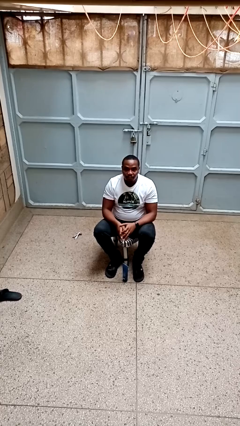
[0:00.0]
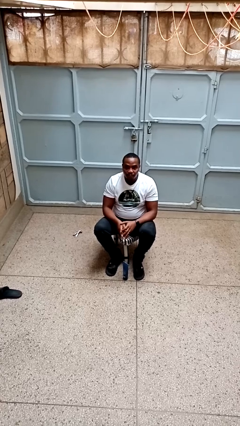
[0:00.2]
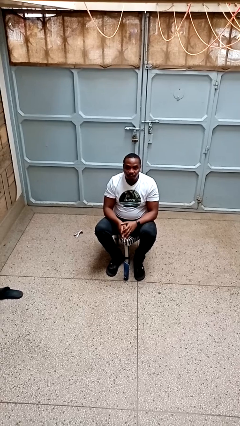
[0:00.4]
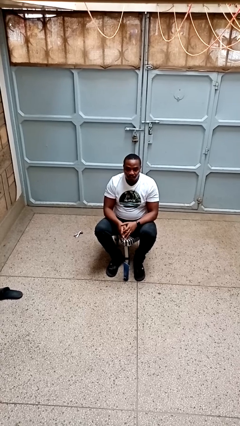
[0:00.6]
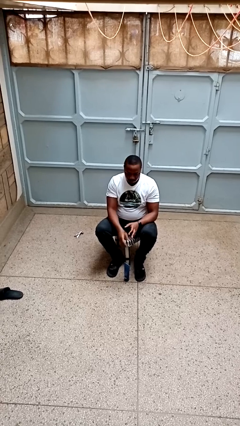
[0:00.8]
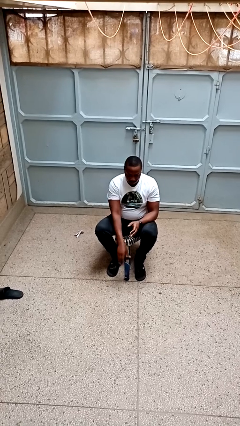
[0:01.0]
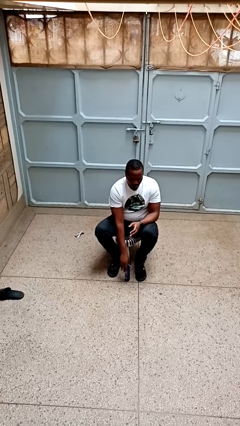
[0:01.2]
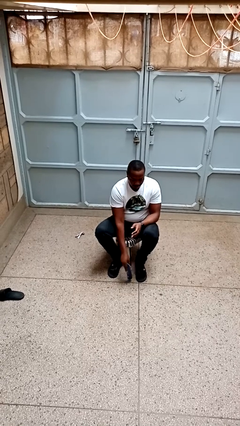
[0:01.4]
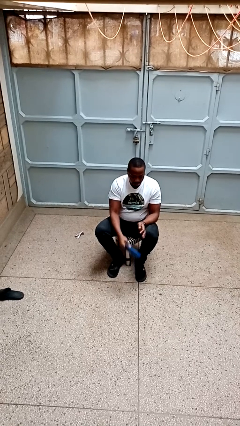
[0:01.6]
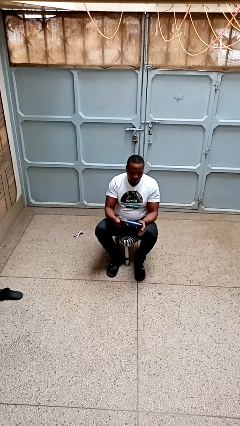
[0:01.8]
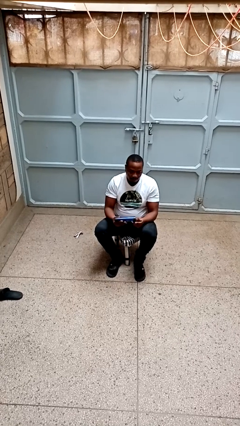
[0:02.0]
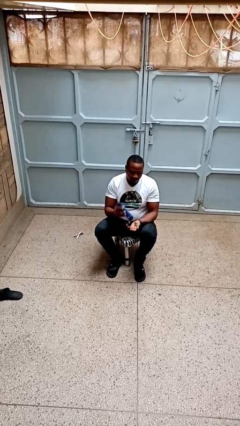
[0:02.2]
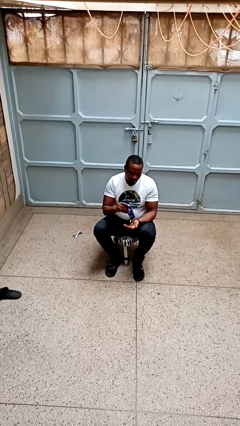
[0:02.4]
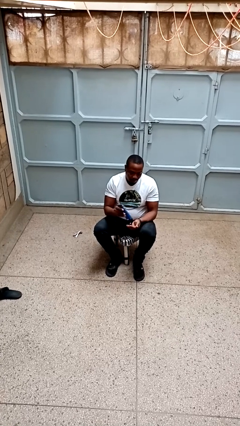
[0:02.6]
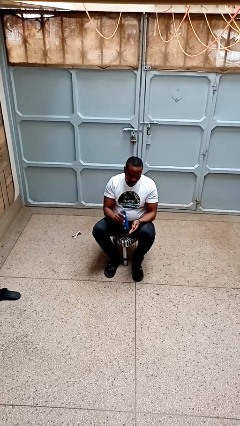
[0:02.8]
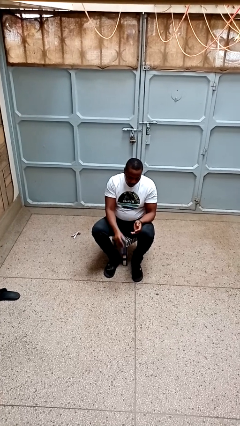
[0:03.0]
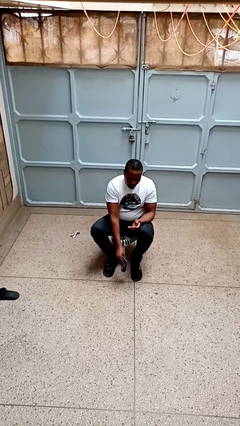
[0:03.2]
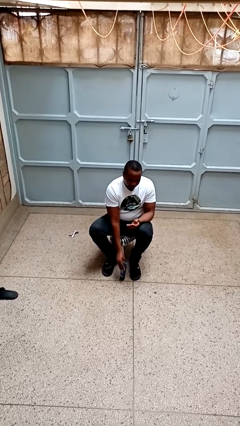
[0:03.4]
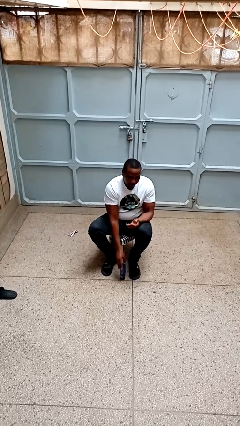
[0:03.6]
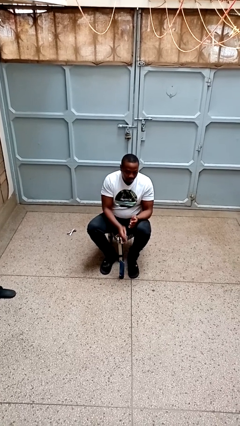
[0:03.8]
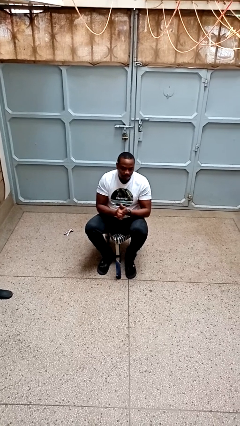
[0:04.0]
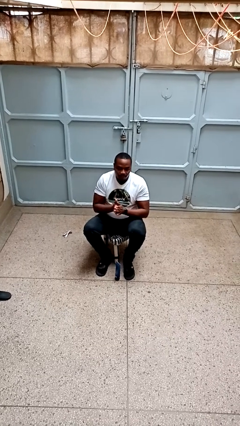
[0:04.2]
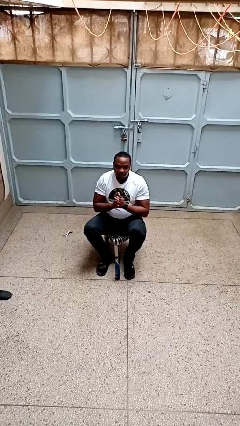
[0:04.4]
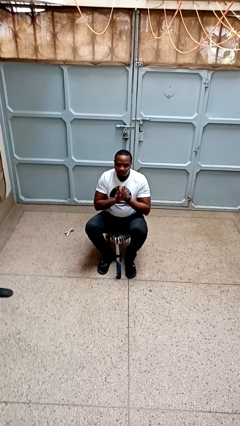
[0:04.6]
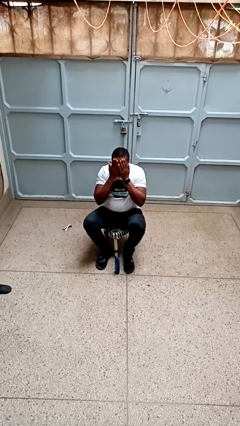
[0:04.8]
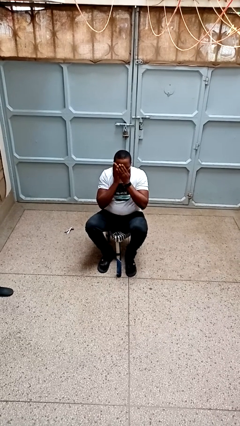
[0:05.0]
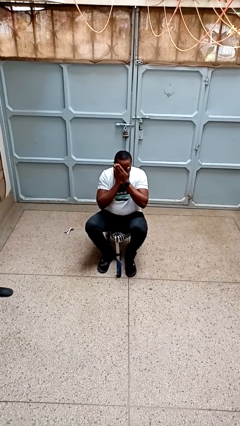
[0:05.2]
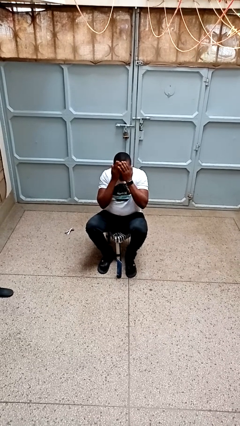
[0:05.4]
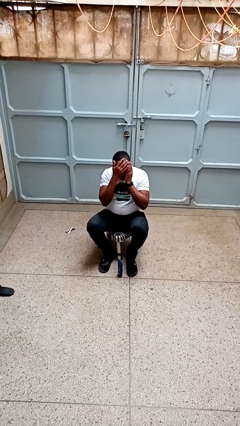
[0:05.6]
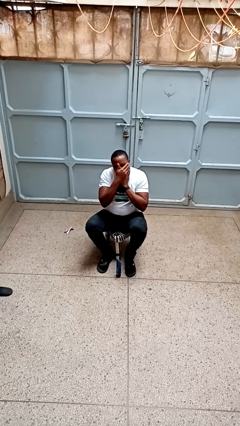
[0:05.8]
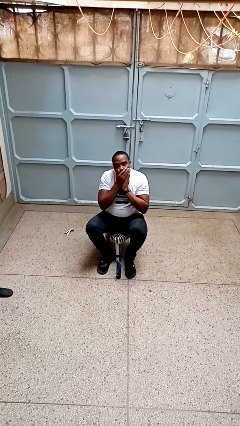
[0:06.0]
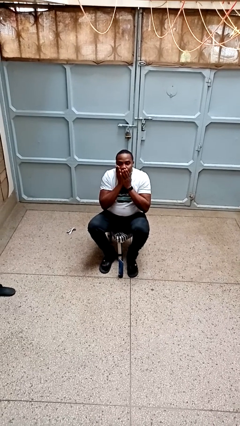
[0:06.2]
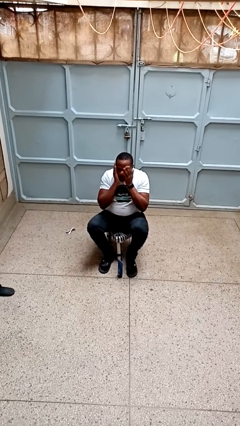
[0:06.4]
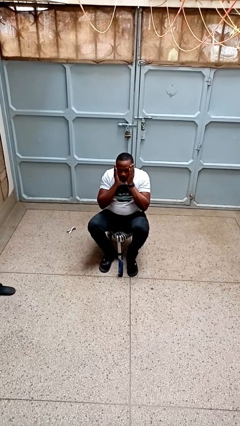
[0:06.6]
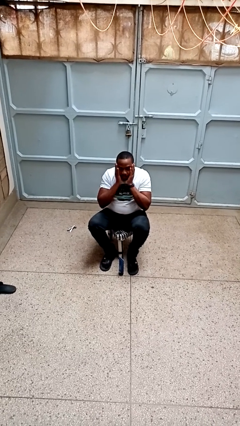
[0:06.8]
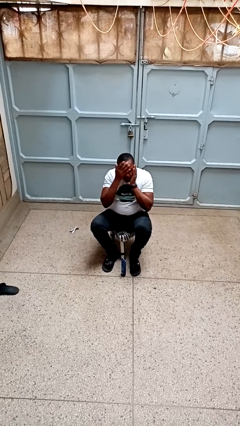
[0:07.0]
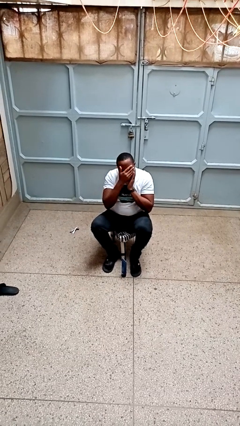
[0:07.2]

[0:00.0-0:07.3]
person applies facial moisturizer

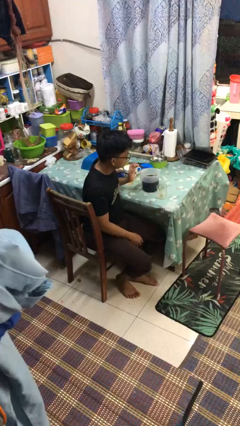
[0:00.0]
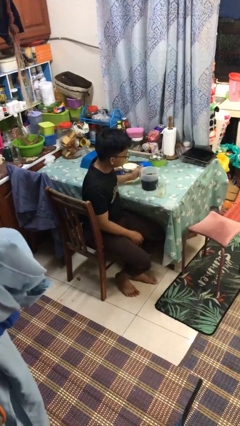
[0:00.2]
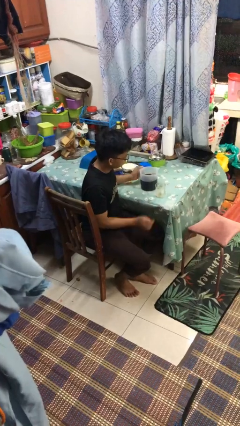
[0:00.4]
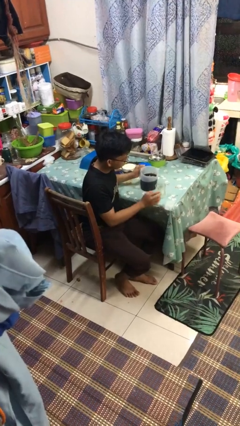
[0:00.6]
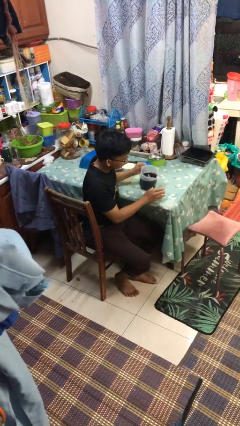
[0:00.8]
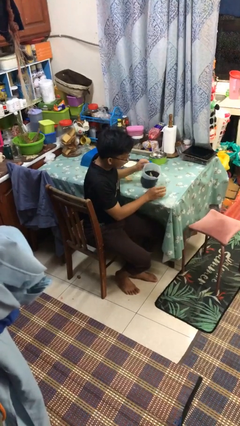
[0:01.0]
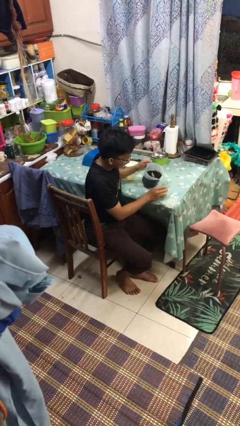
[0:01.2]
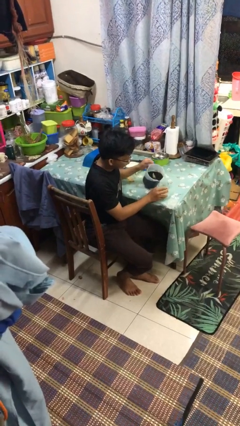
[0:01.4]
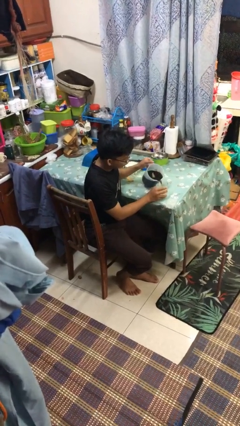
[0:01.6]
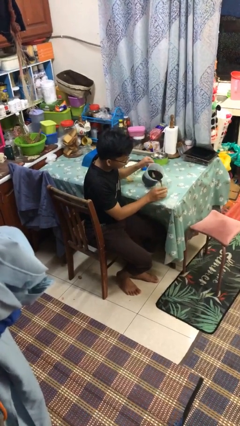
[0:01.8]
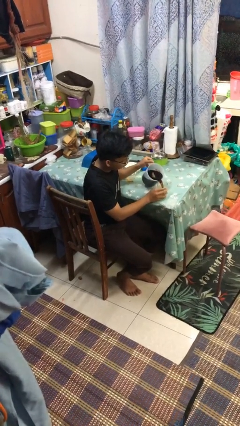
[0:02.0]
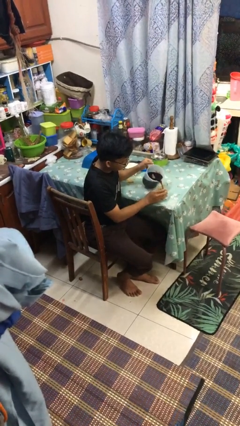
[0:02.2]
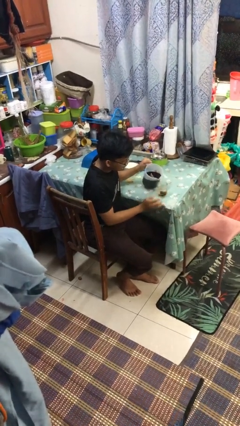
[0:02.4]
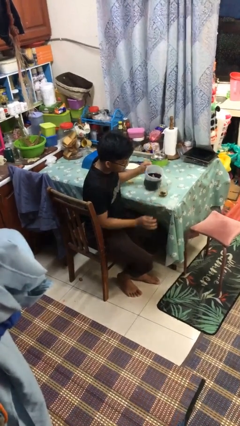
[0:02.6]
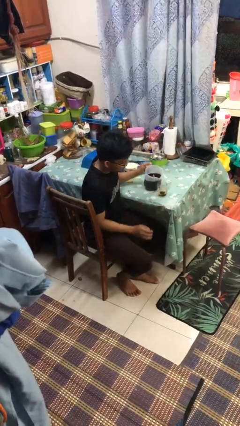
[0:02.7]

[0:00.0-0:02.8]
person pours coffee into mug

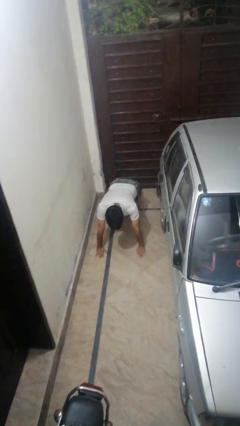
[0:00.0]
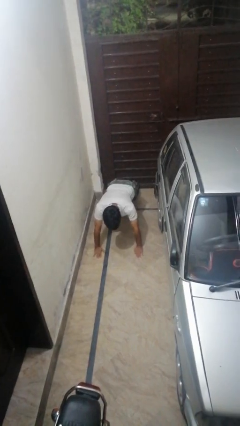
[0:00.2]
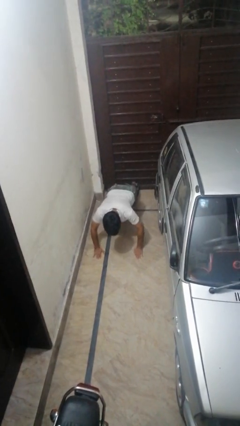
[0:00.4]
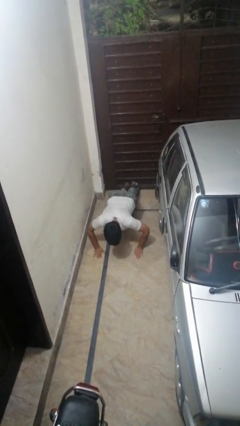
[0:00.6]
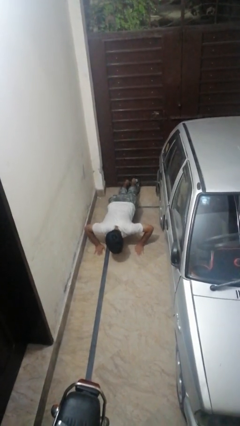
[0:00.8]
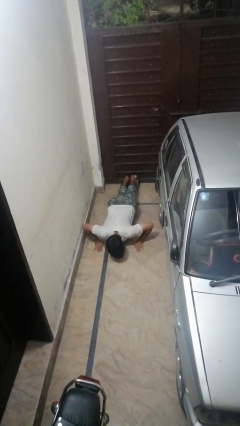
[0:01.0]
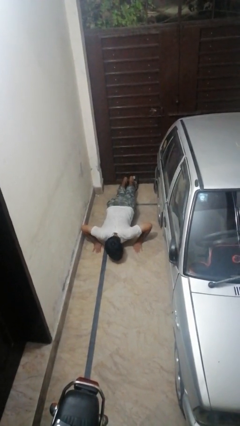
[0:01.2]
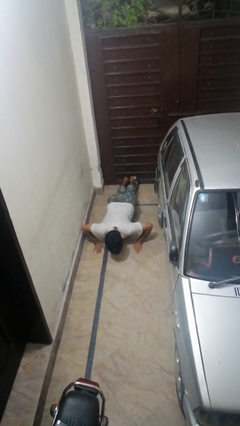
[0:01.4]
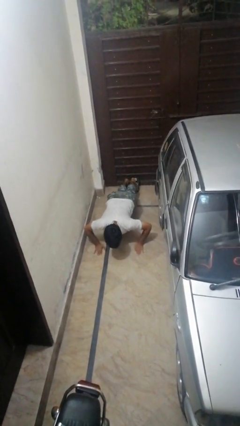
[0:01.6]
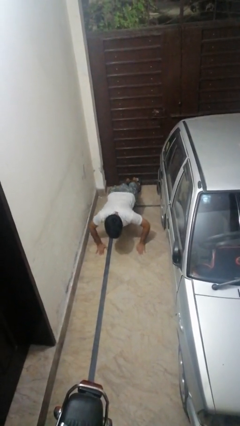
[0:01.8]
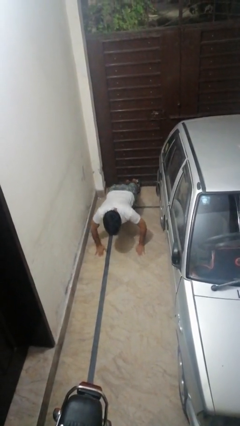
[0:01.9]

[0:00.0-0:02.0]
person exercises with pushup

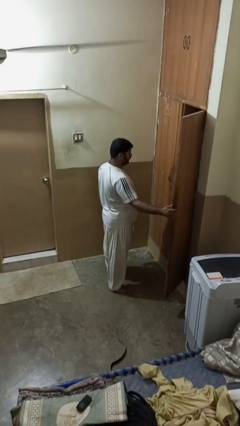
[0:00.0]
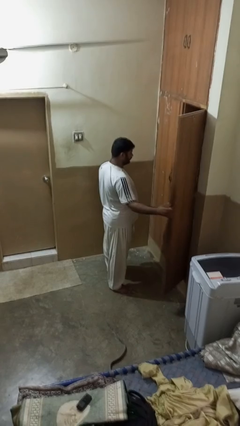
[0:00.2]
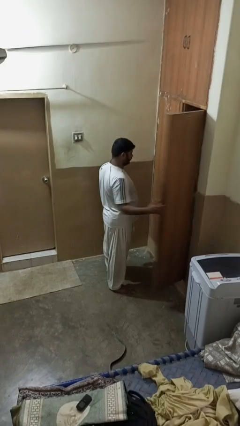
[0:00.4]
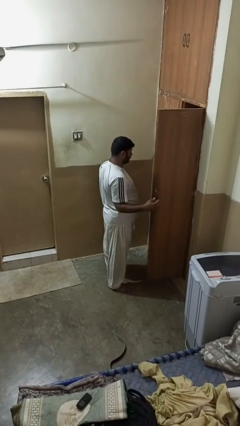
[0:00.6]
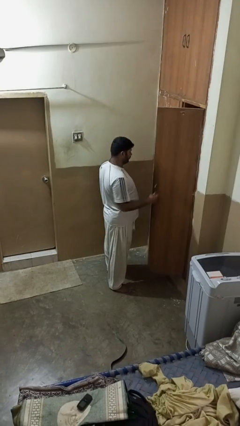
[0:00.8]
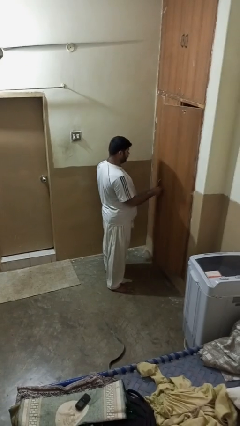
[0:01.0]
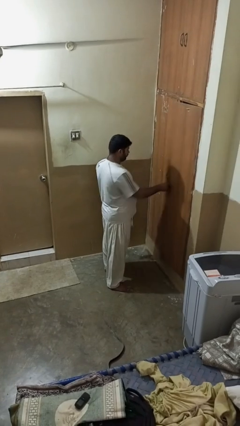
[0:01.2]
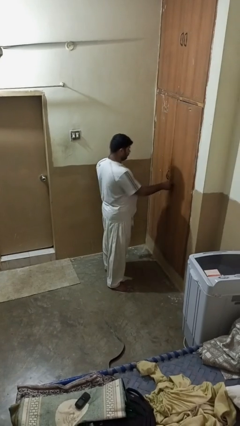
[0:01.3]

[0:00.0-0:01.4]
person closes closet door

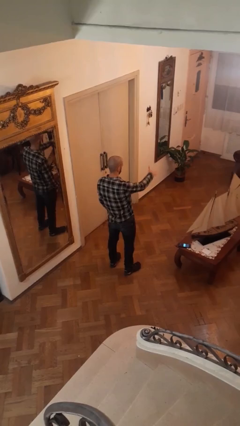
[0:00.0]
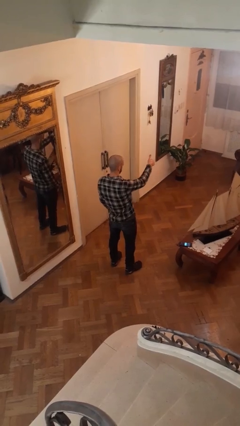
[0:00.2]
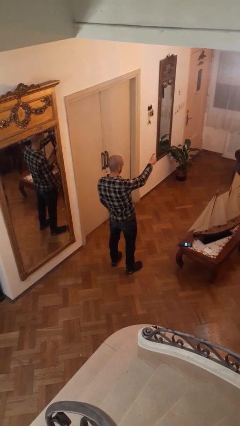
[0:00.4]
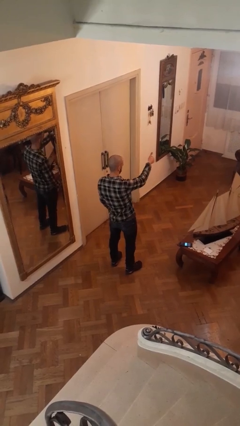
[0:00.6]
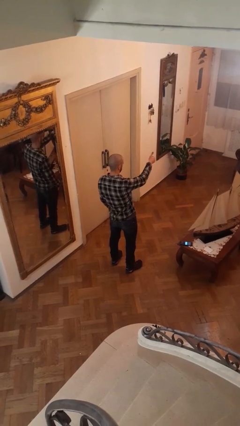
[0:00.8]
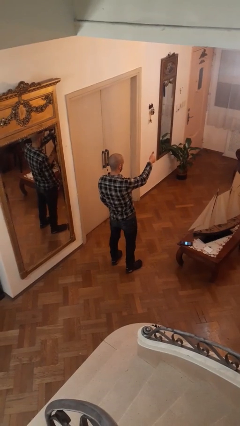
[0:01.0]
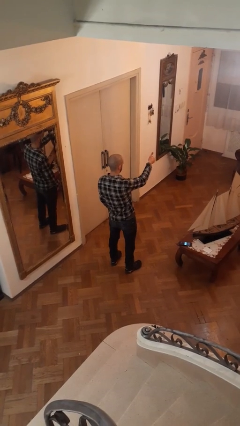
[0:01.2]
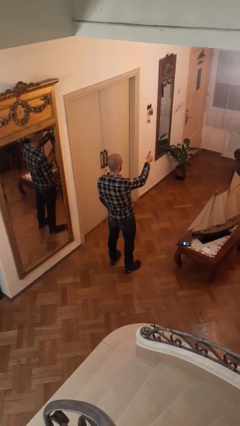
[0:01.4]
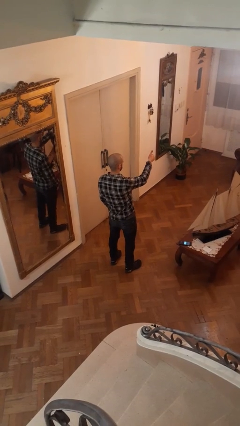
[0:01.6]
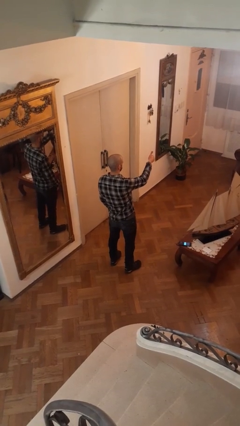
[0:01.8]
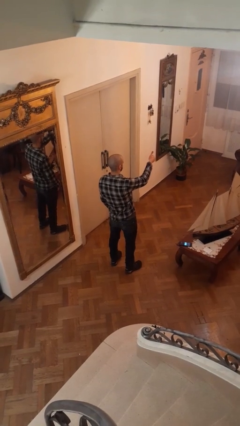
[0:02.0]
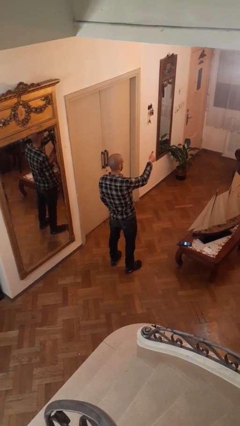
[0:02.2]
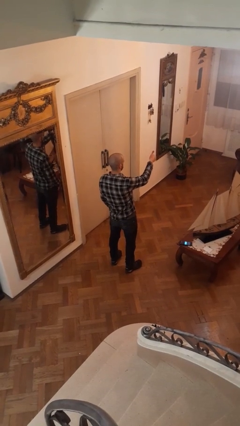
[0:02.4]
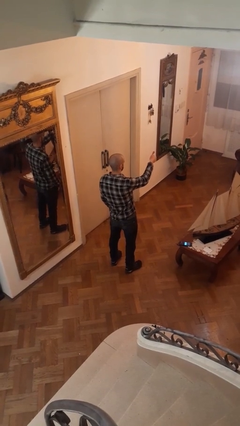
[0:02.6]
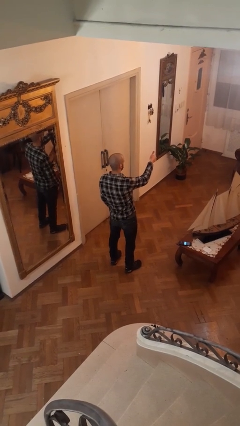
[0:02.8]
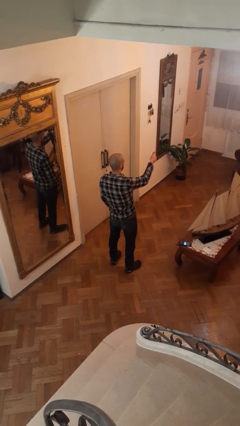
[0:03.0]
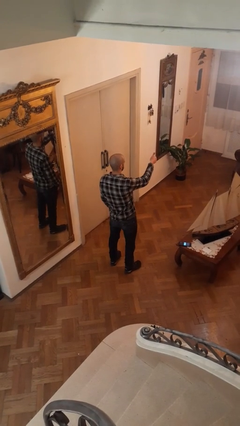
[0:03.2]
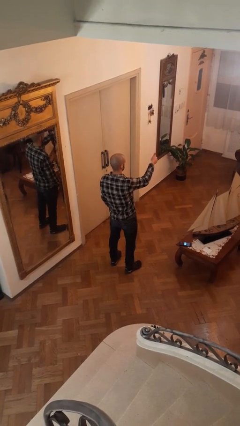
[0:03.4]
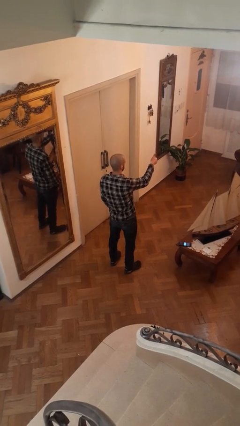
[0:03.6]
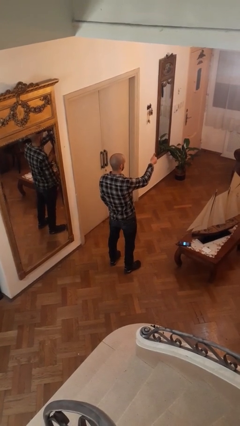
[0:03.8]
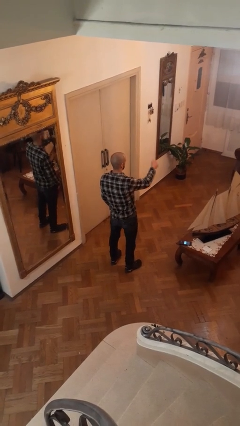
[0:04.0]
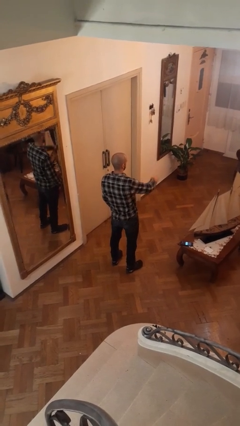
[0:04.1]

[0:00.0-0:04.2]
person gestures thumbs up

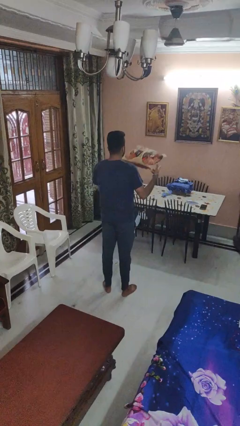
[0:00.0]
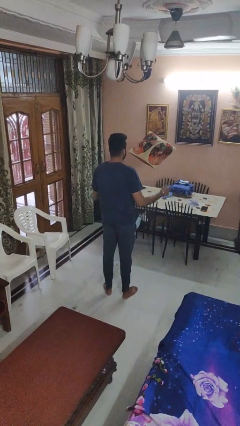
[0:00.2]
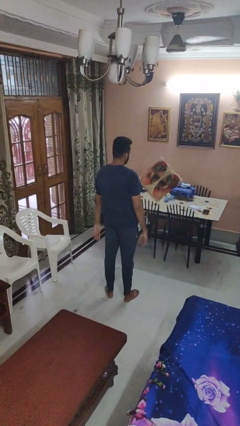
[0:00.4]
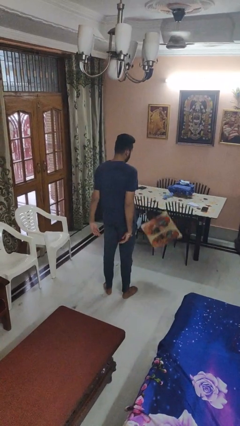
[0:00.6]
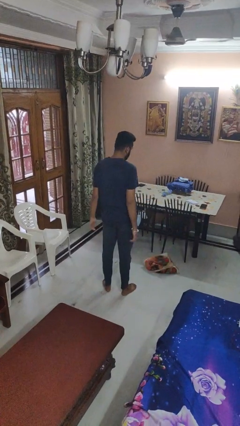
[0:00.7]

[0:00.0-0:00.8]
person throws object into air
